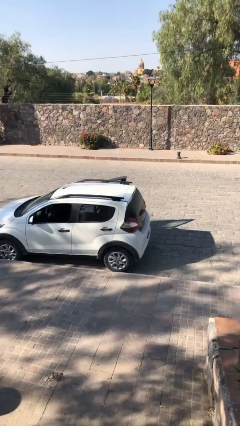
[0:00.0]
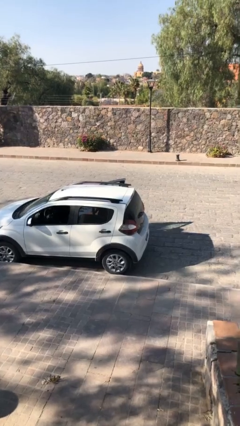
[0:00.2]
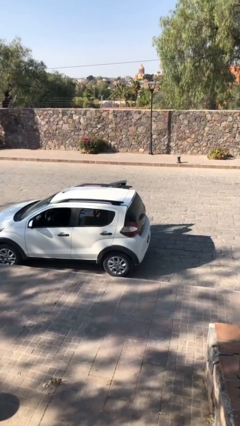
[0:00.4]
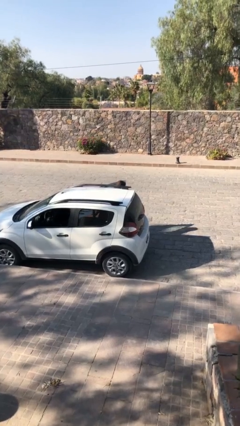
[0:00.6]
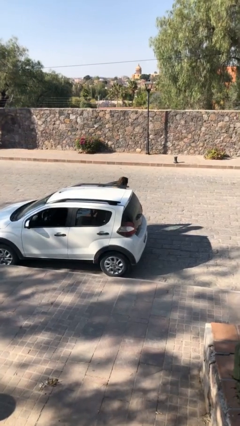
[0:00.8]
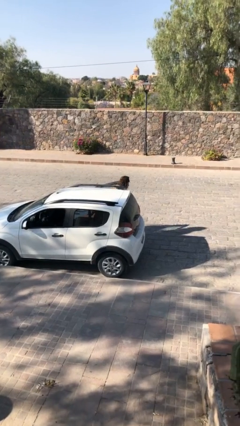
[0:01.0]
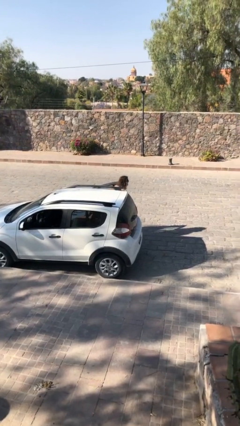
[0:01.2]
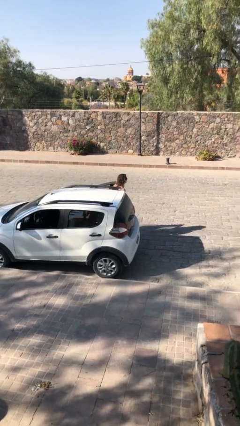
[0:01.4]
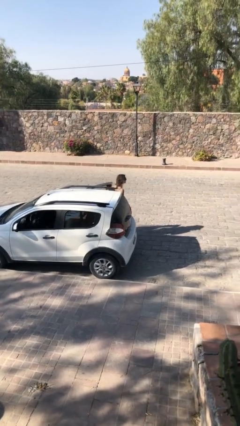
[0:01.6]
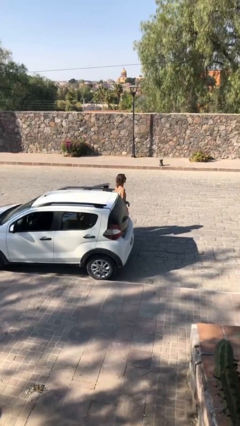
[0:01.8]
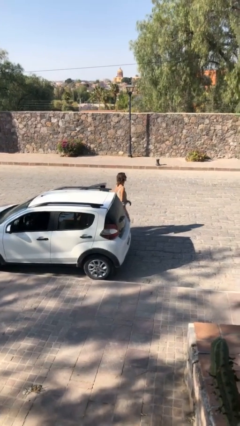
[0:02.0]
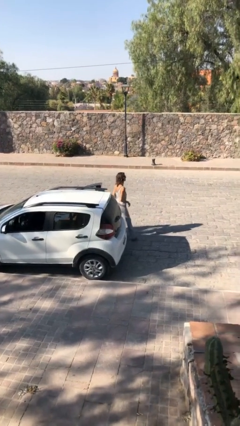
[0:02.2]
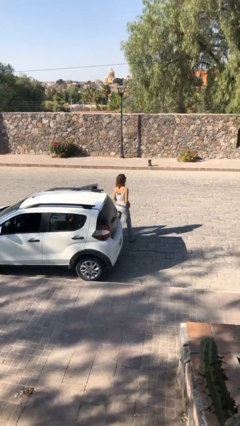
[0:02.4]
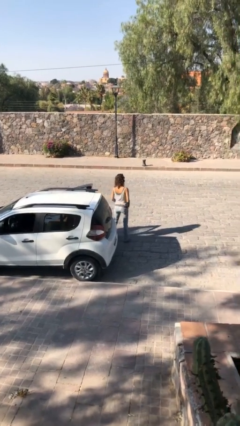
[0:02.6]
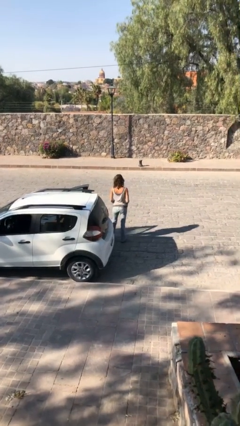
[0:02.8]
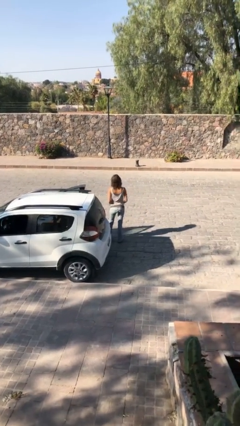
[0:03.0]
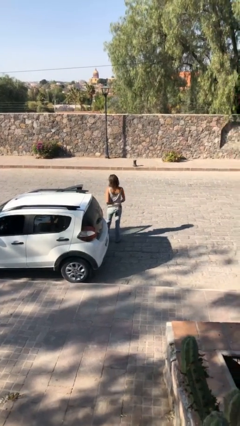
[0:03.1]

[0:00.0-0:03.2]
person exits car

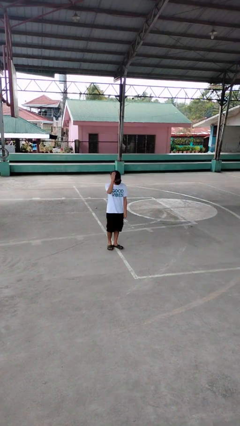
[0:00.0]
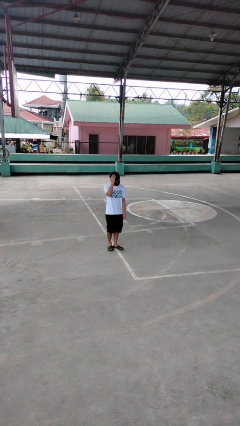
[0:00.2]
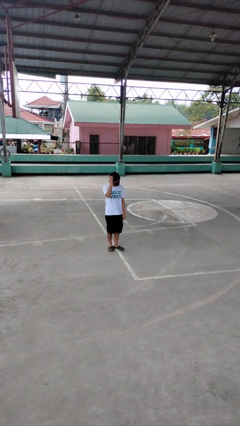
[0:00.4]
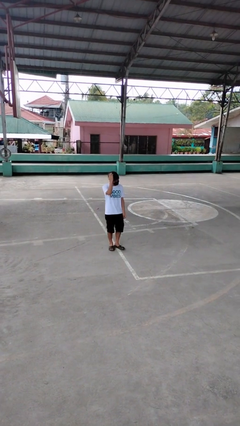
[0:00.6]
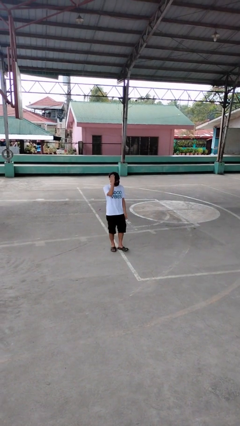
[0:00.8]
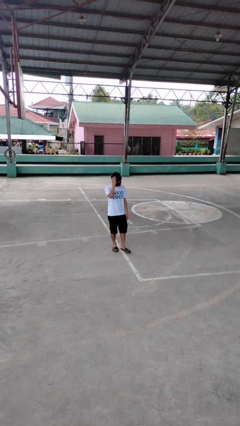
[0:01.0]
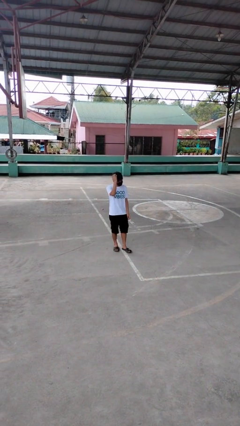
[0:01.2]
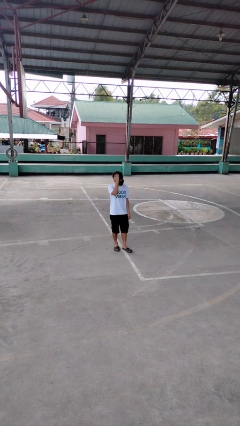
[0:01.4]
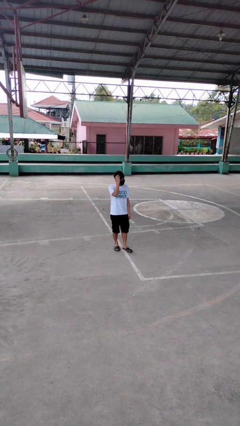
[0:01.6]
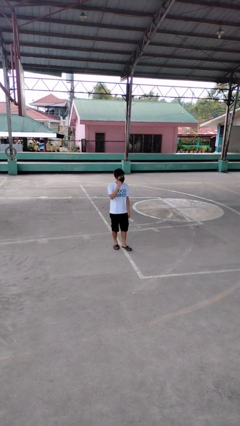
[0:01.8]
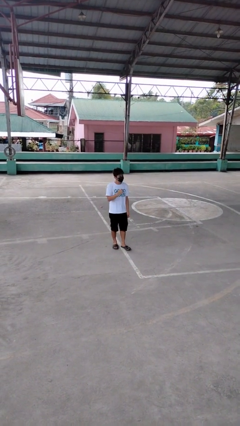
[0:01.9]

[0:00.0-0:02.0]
person pats head

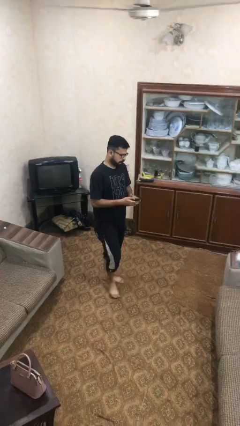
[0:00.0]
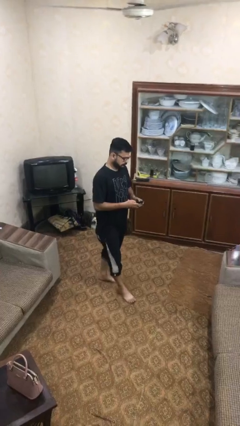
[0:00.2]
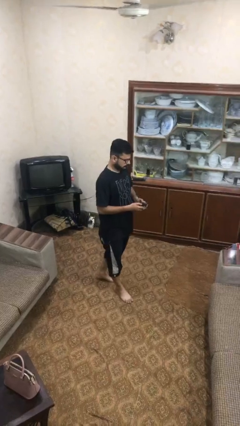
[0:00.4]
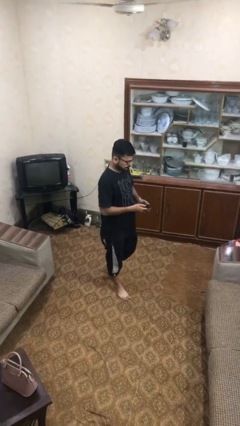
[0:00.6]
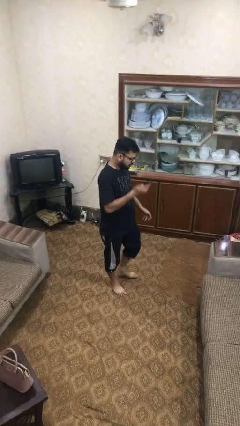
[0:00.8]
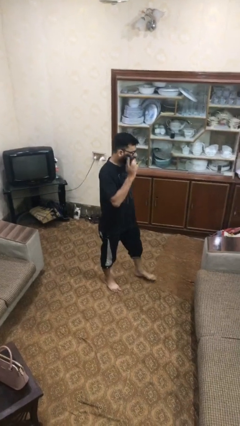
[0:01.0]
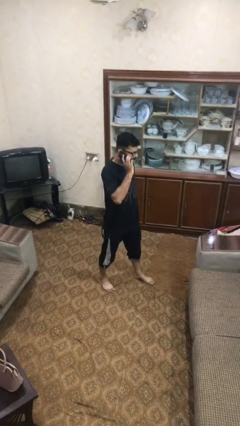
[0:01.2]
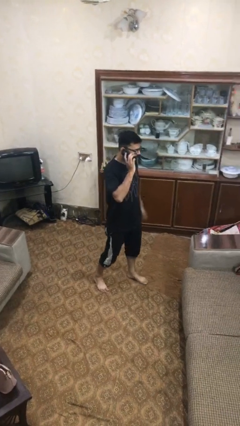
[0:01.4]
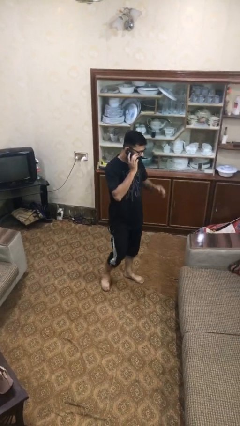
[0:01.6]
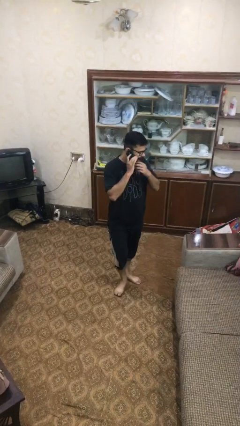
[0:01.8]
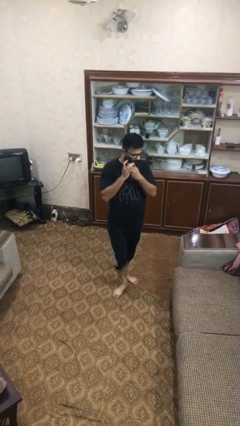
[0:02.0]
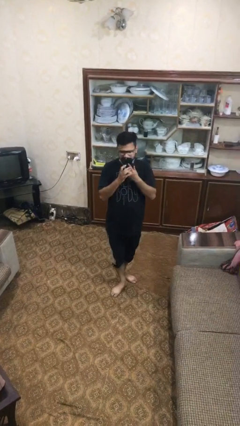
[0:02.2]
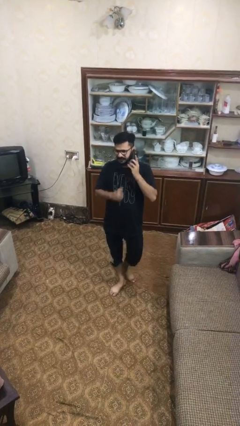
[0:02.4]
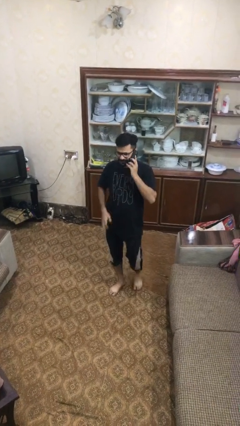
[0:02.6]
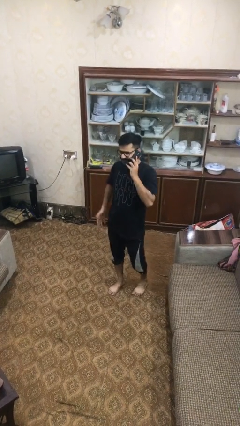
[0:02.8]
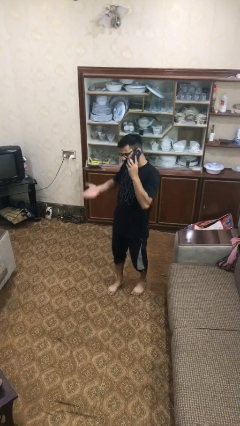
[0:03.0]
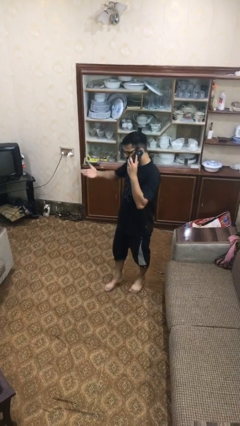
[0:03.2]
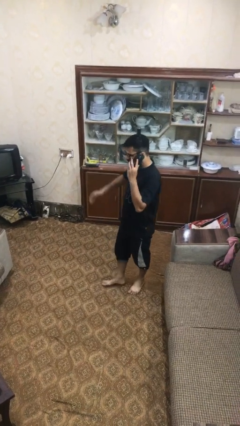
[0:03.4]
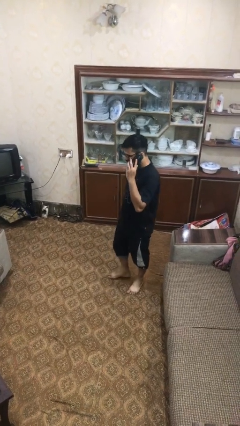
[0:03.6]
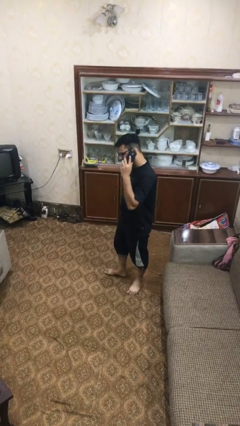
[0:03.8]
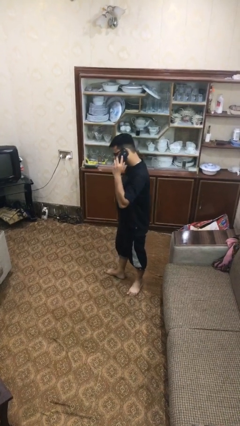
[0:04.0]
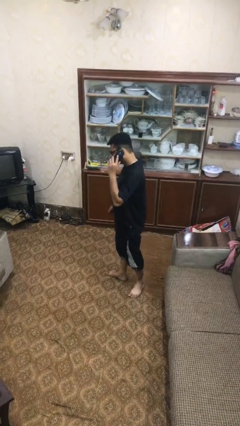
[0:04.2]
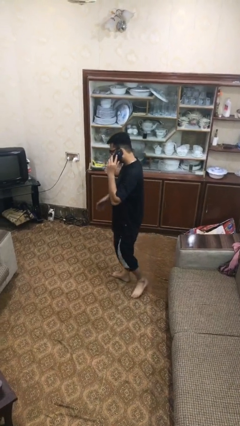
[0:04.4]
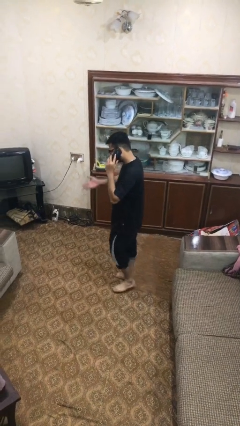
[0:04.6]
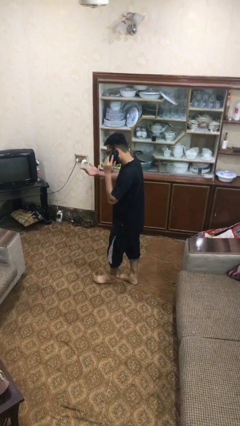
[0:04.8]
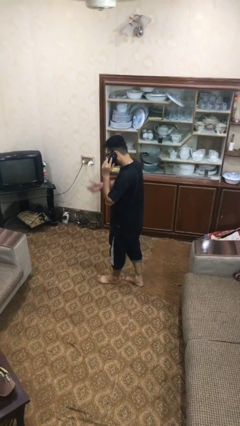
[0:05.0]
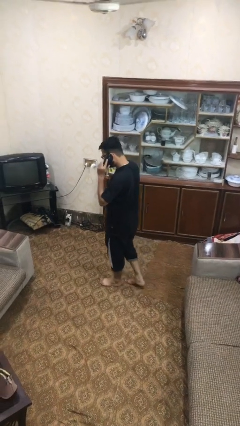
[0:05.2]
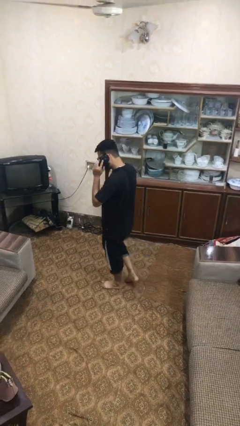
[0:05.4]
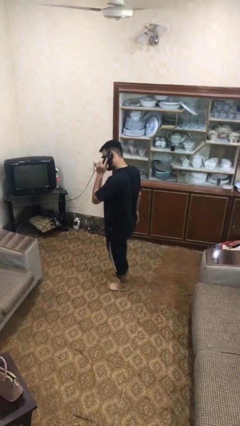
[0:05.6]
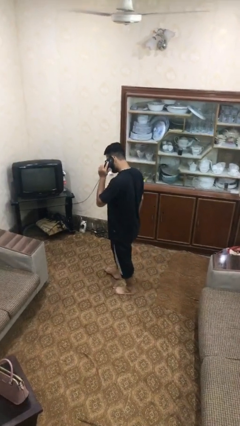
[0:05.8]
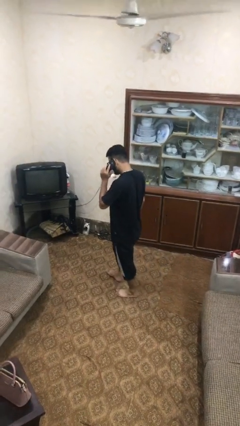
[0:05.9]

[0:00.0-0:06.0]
person talks on phone

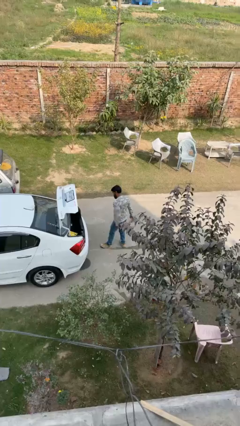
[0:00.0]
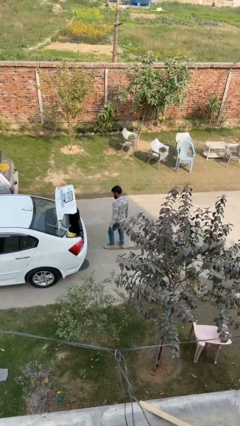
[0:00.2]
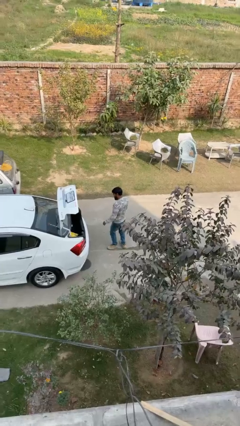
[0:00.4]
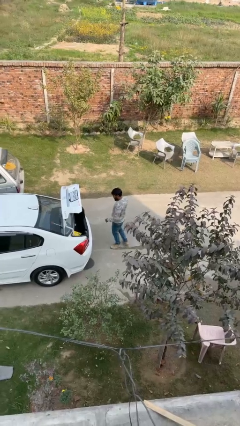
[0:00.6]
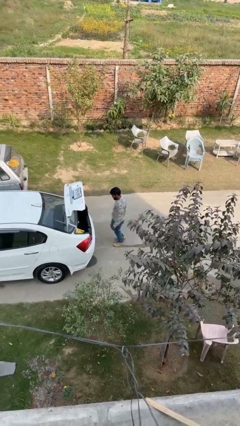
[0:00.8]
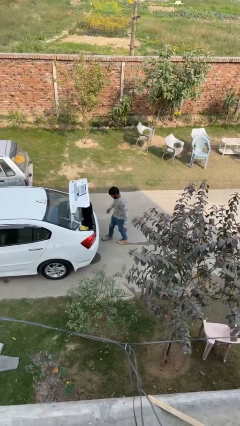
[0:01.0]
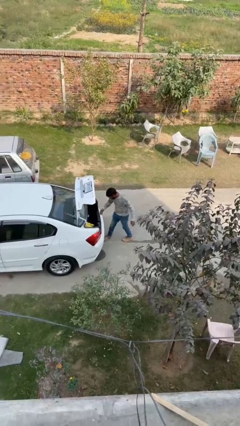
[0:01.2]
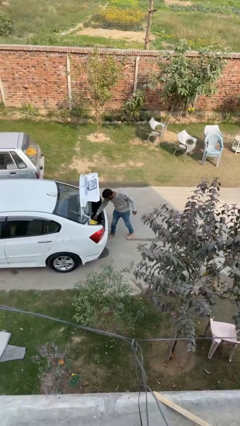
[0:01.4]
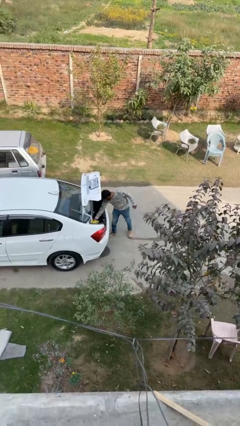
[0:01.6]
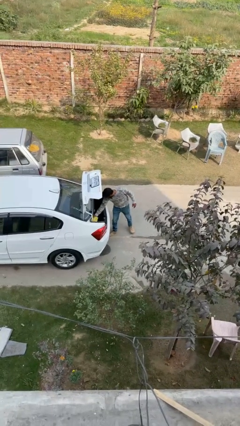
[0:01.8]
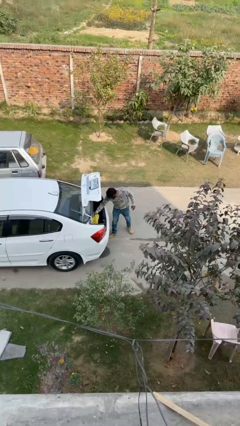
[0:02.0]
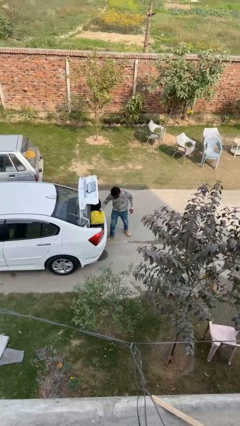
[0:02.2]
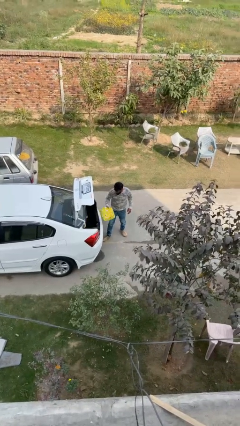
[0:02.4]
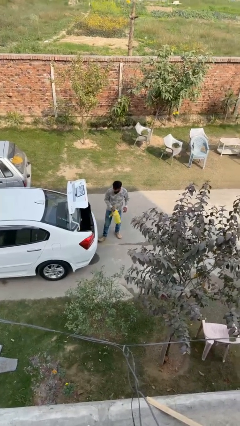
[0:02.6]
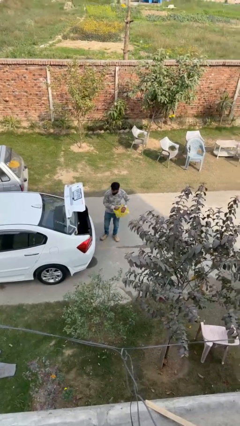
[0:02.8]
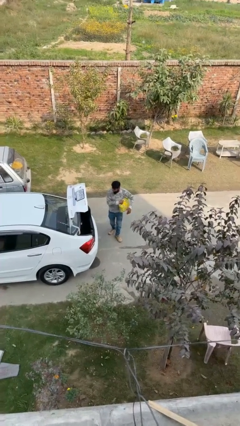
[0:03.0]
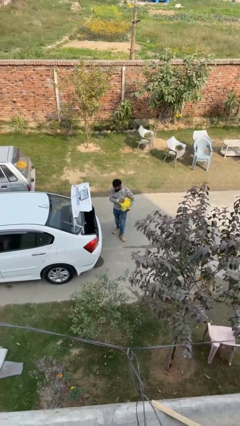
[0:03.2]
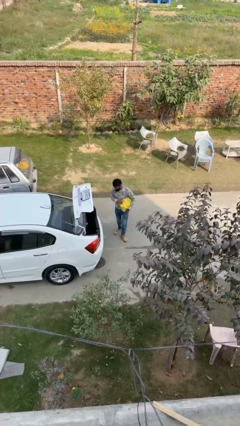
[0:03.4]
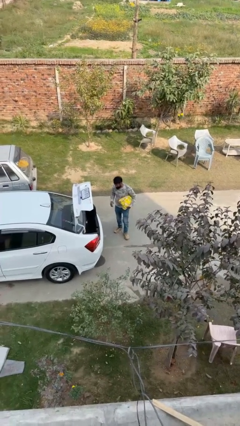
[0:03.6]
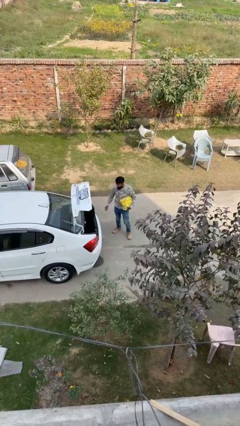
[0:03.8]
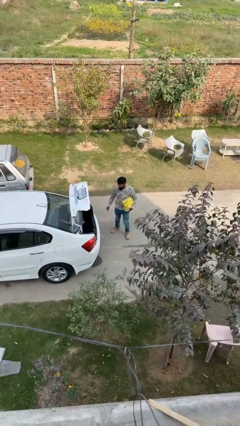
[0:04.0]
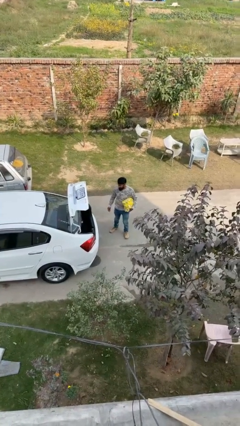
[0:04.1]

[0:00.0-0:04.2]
person unloads car

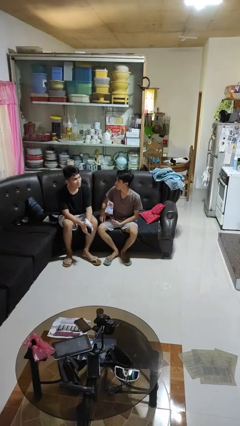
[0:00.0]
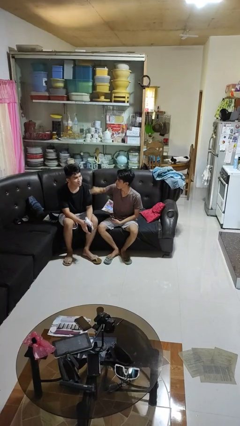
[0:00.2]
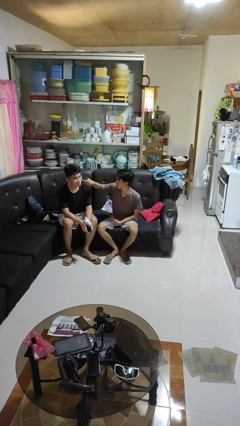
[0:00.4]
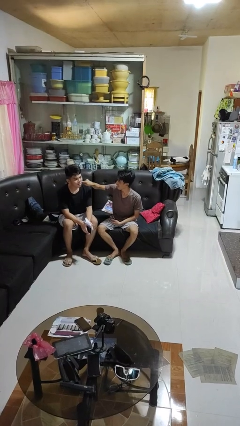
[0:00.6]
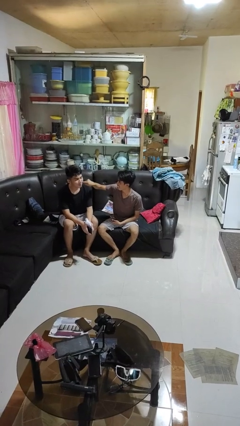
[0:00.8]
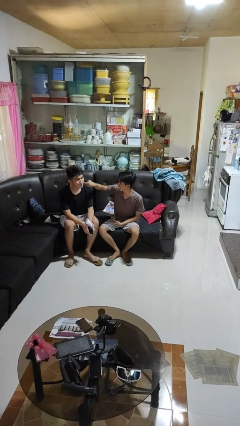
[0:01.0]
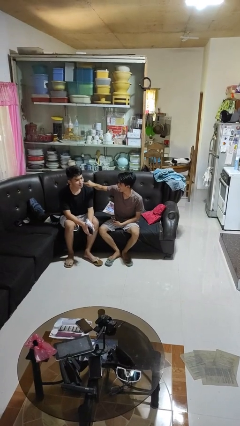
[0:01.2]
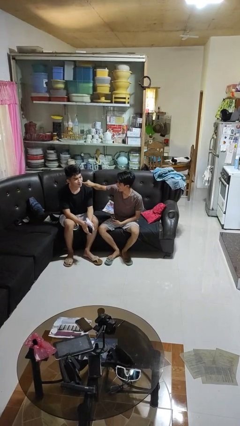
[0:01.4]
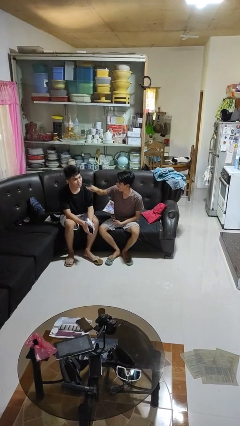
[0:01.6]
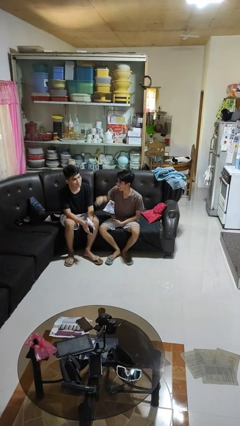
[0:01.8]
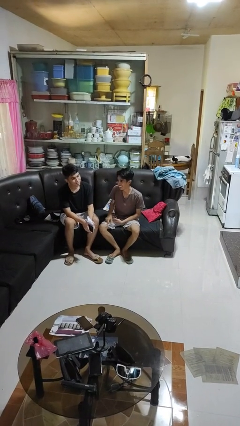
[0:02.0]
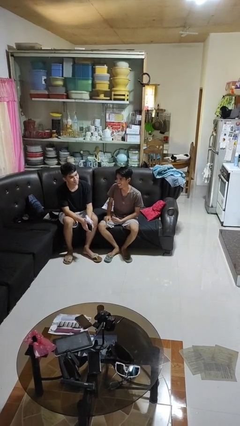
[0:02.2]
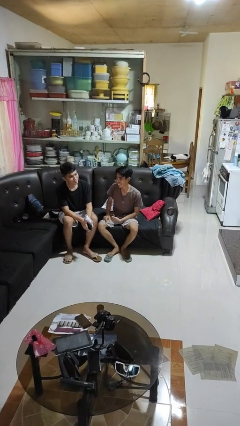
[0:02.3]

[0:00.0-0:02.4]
person touches face of person
